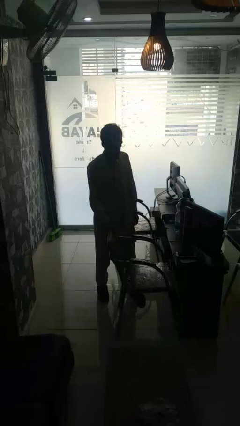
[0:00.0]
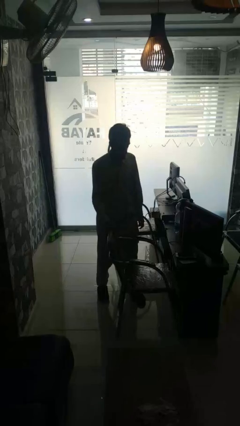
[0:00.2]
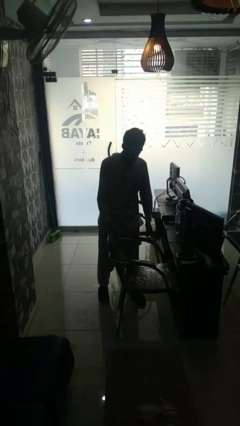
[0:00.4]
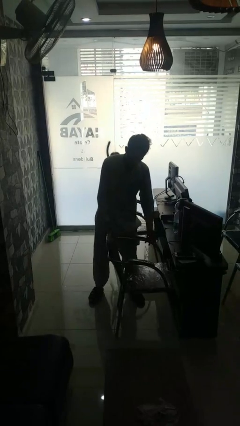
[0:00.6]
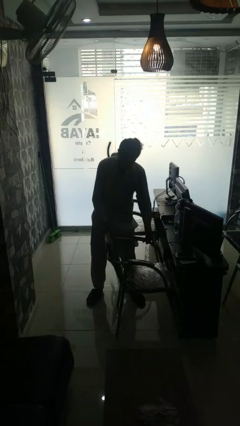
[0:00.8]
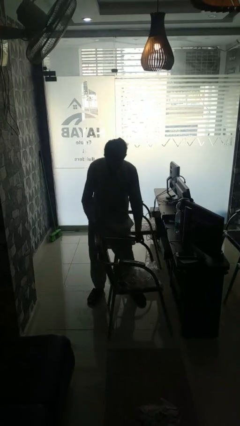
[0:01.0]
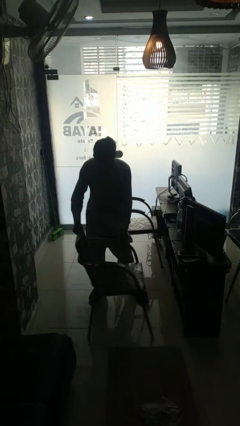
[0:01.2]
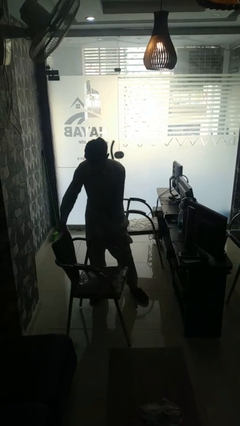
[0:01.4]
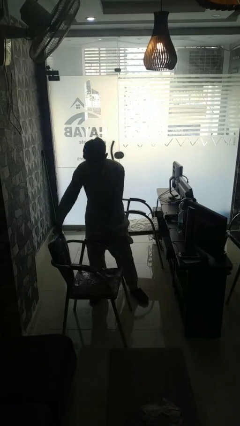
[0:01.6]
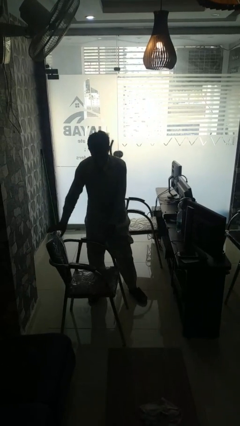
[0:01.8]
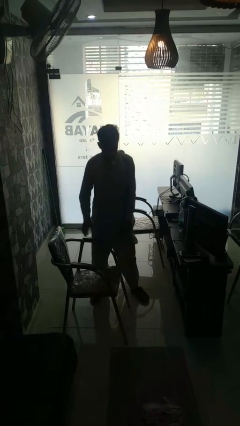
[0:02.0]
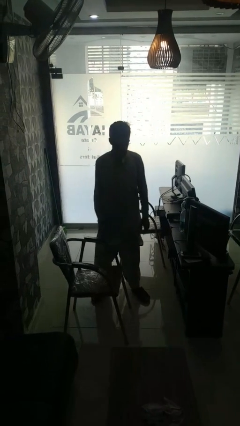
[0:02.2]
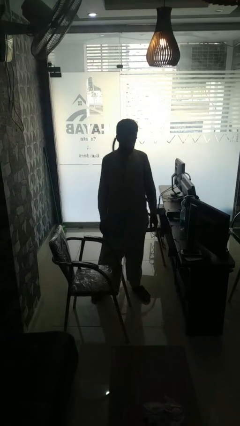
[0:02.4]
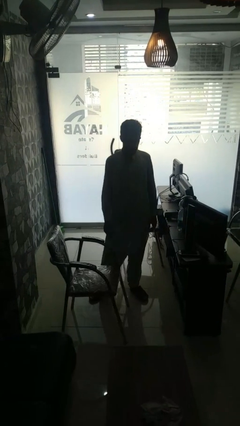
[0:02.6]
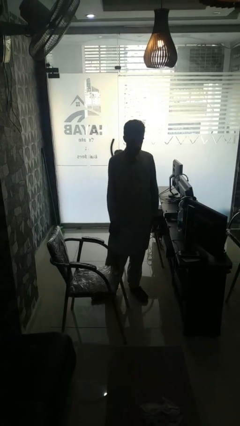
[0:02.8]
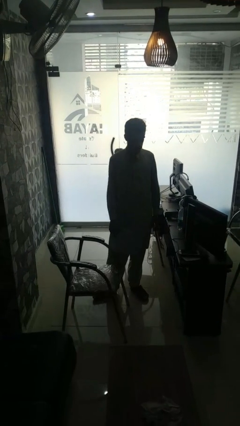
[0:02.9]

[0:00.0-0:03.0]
person pulls out chair

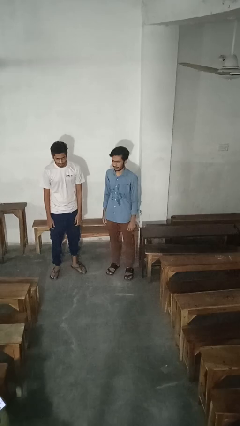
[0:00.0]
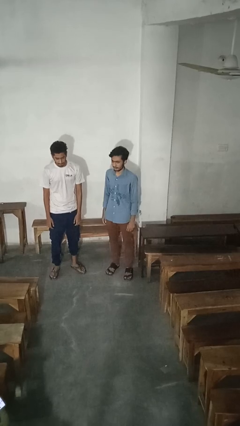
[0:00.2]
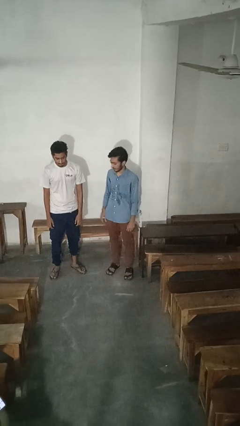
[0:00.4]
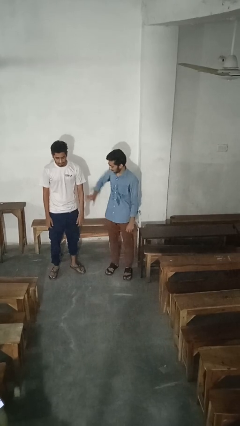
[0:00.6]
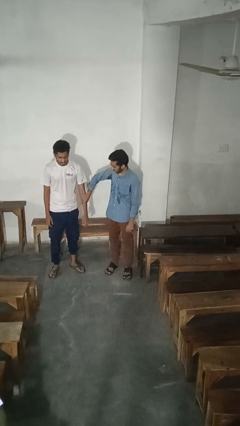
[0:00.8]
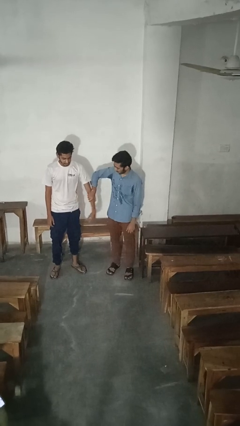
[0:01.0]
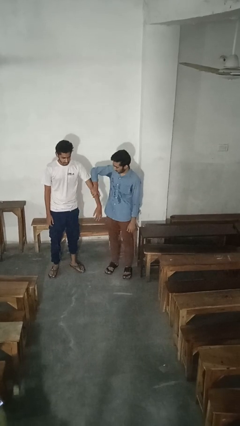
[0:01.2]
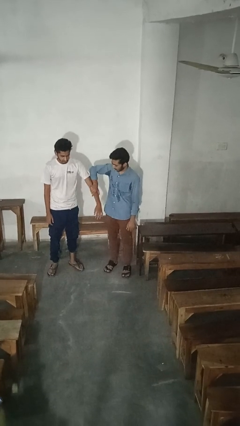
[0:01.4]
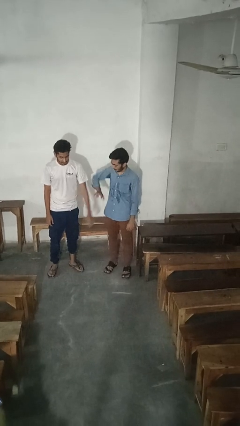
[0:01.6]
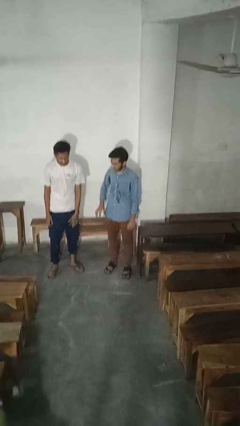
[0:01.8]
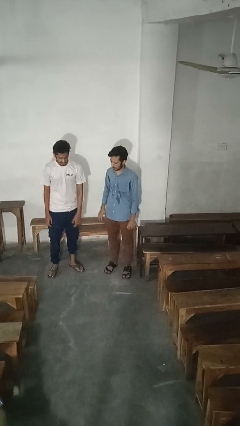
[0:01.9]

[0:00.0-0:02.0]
person grabs person by forearm

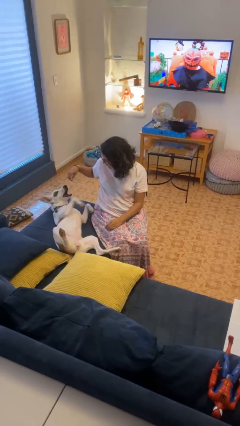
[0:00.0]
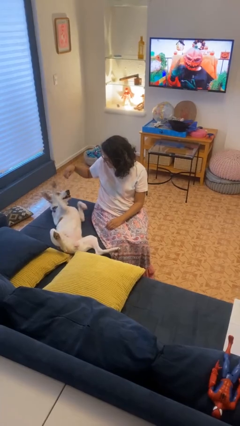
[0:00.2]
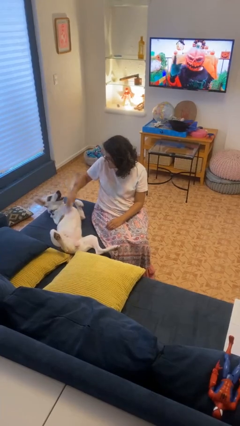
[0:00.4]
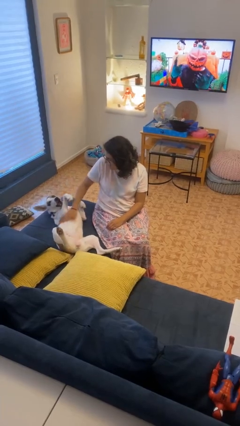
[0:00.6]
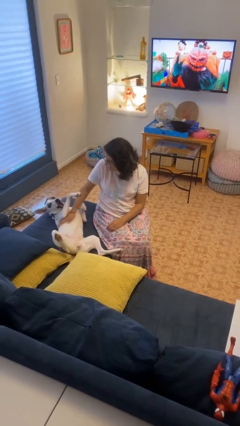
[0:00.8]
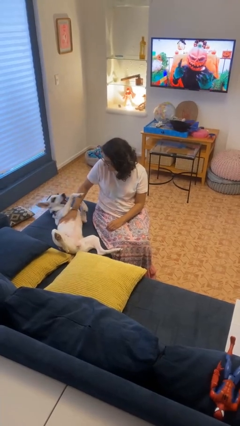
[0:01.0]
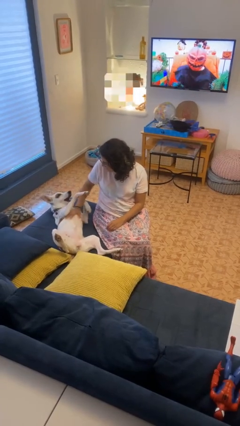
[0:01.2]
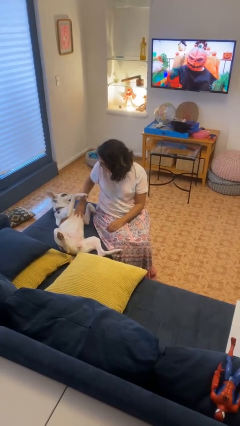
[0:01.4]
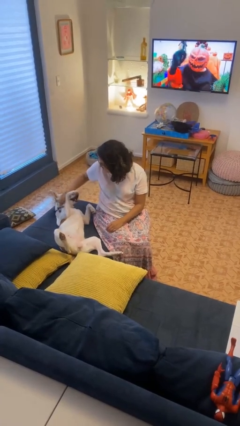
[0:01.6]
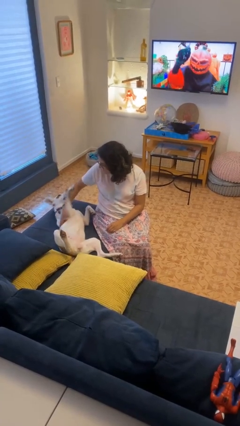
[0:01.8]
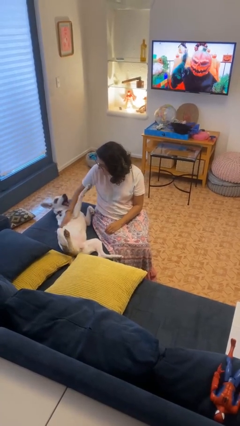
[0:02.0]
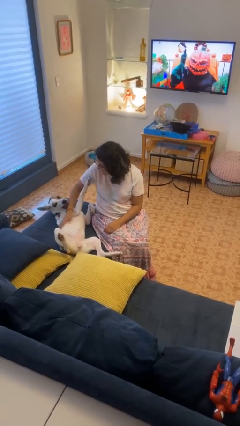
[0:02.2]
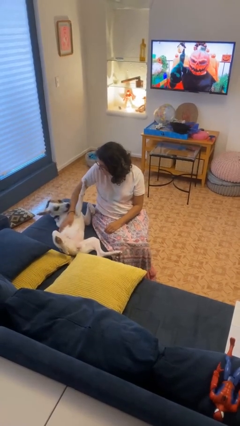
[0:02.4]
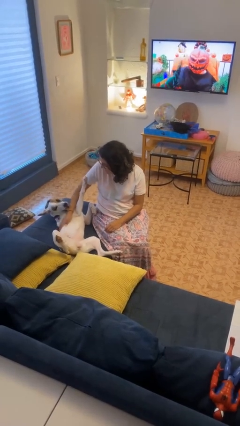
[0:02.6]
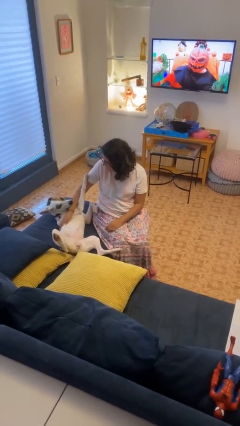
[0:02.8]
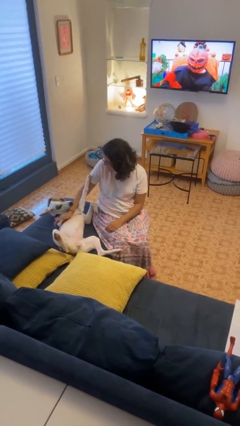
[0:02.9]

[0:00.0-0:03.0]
person pets dog

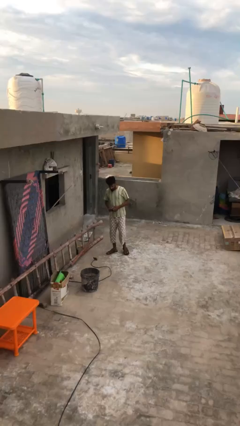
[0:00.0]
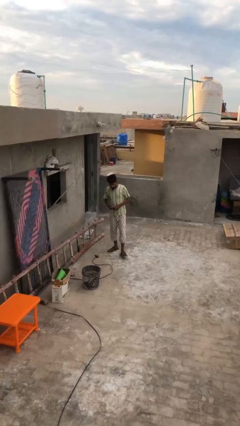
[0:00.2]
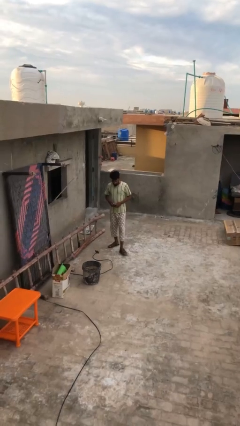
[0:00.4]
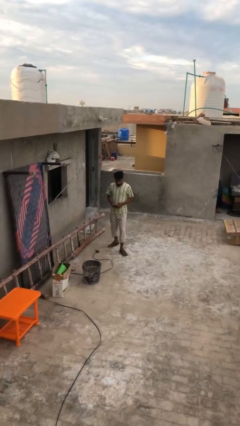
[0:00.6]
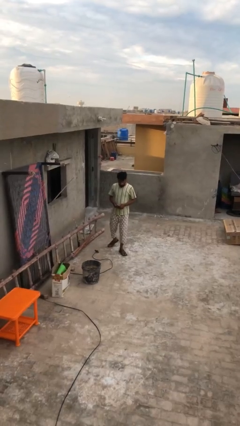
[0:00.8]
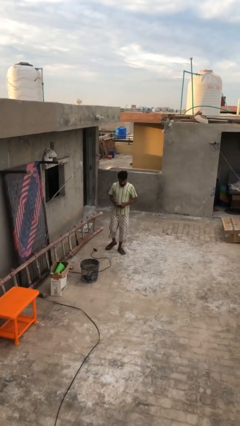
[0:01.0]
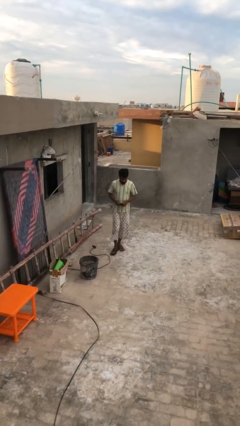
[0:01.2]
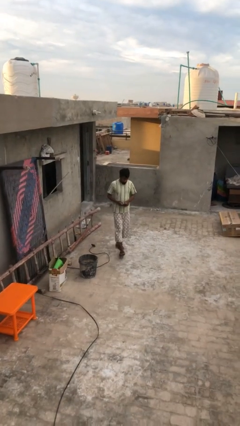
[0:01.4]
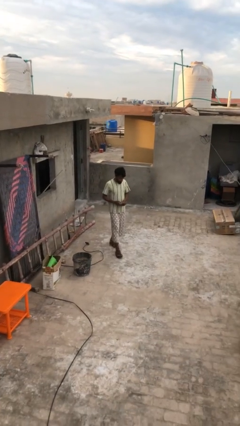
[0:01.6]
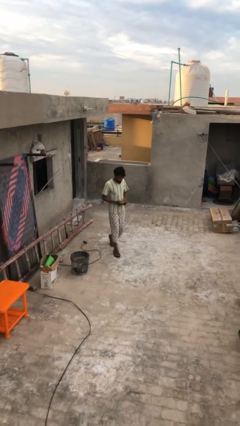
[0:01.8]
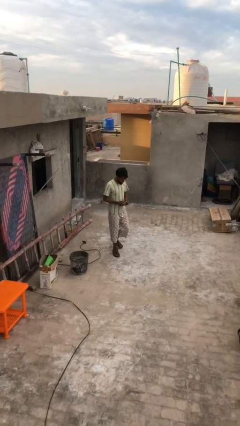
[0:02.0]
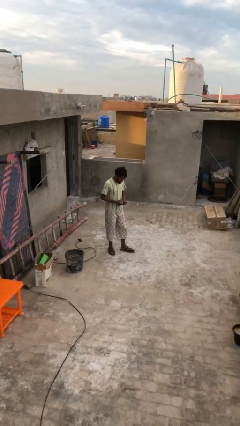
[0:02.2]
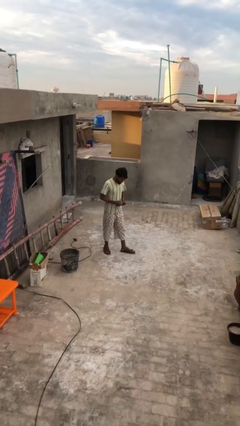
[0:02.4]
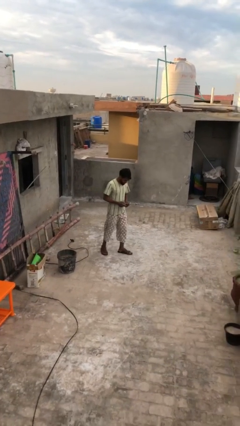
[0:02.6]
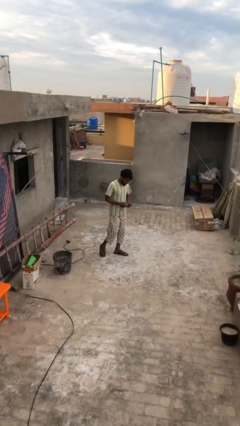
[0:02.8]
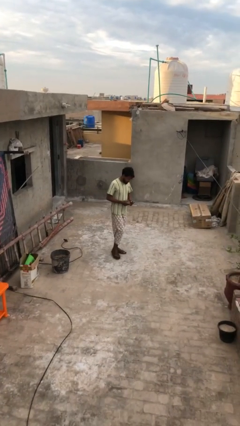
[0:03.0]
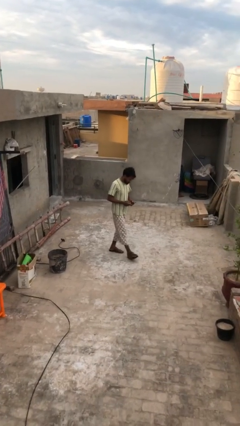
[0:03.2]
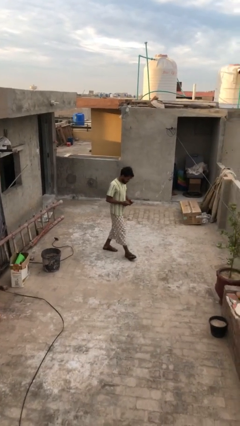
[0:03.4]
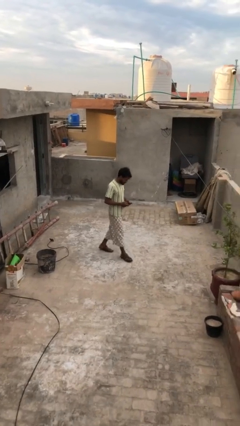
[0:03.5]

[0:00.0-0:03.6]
person texts on phone

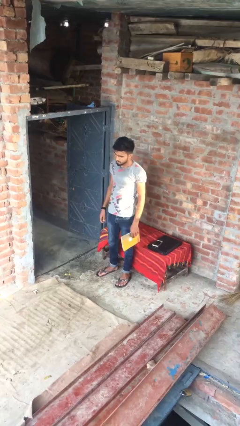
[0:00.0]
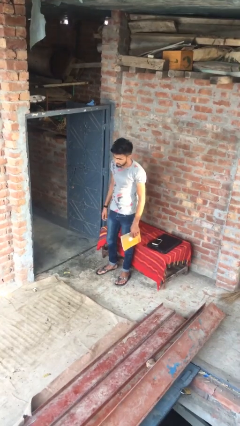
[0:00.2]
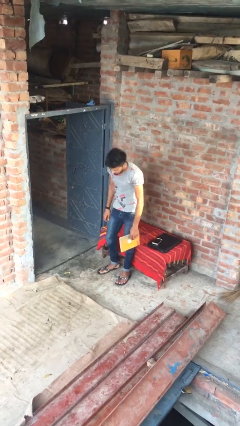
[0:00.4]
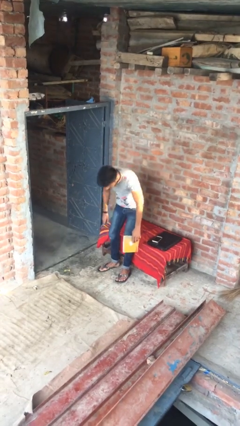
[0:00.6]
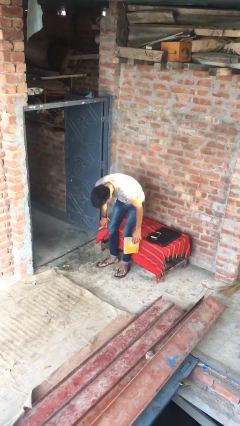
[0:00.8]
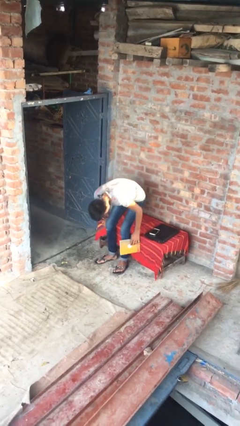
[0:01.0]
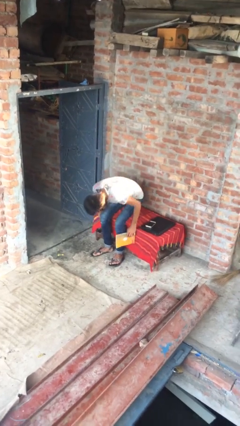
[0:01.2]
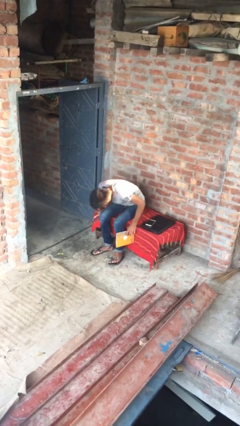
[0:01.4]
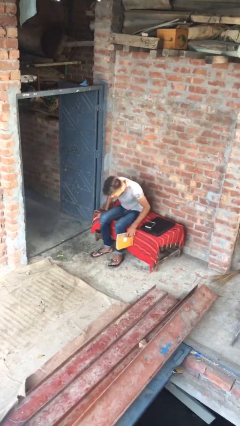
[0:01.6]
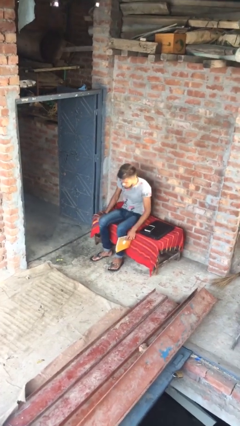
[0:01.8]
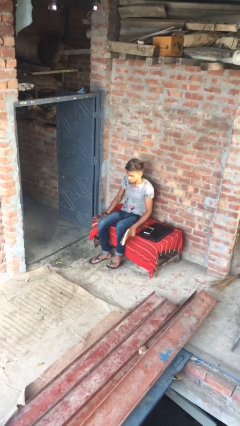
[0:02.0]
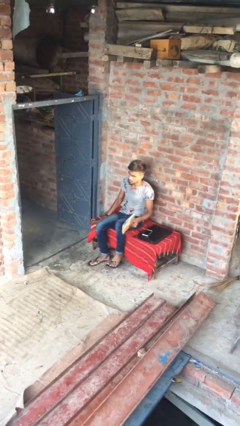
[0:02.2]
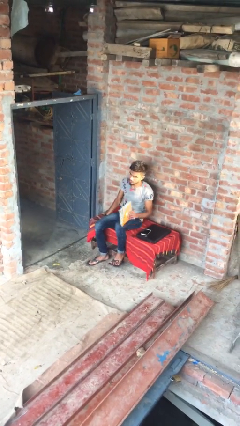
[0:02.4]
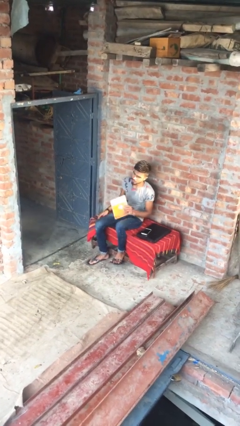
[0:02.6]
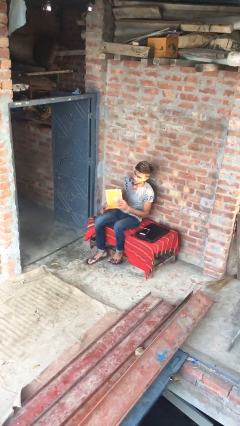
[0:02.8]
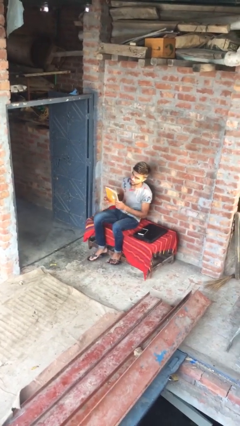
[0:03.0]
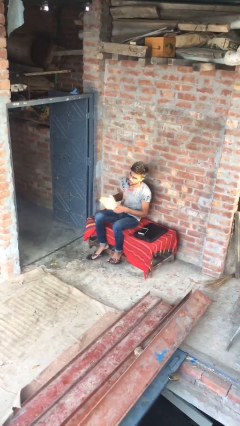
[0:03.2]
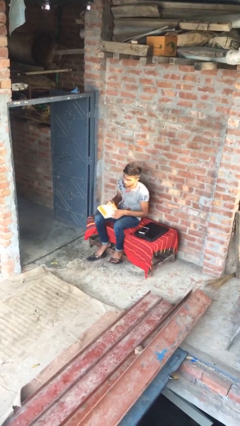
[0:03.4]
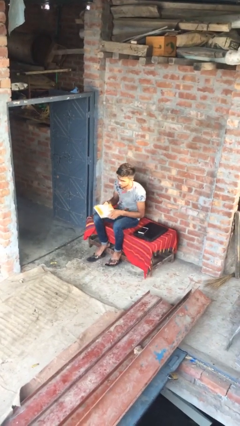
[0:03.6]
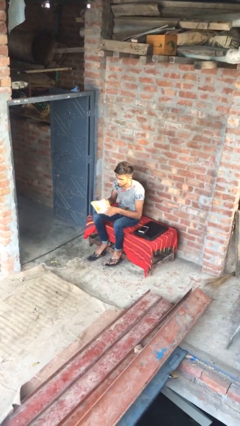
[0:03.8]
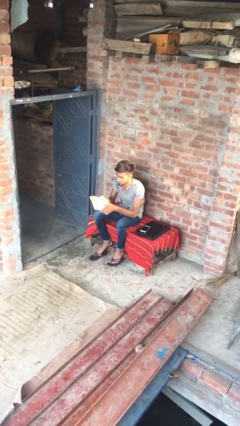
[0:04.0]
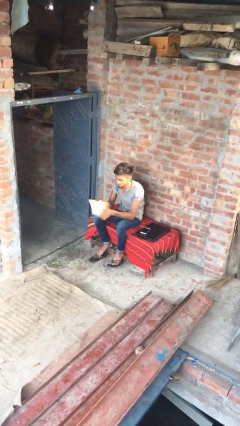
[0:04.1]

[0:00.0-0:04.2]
person sits down

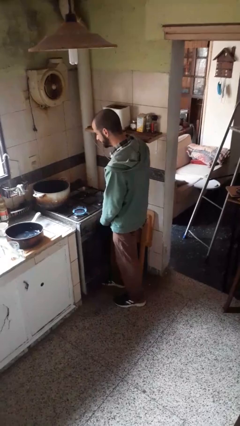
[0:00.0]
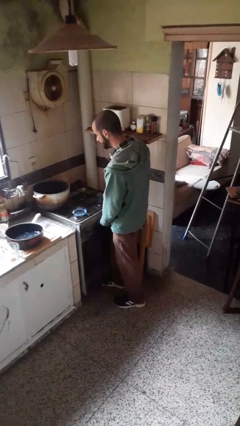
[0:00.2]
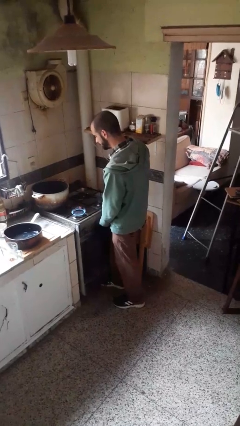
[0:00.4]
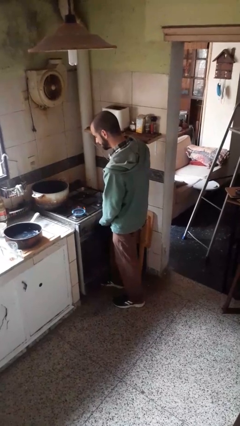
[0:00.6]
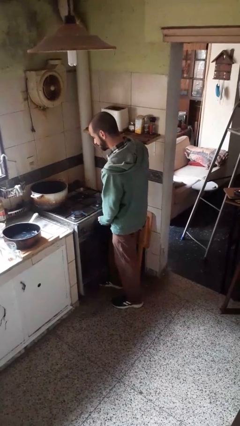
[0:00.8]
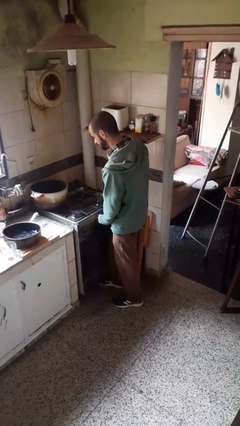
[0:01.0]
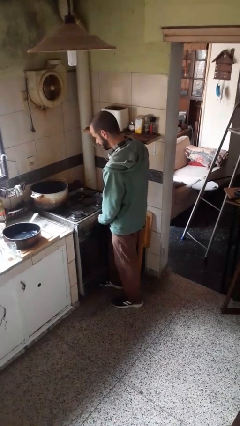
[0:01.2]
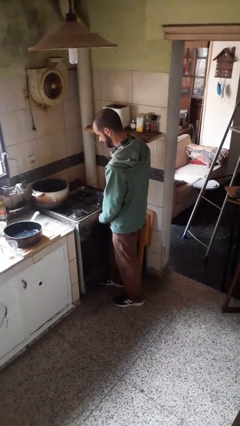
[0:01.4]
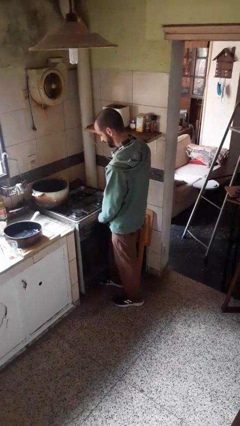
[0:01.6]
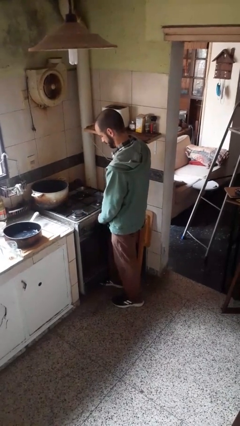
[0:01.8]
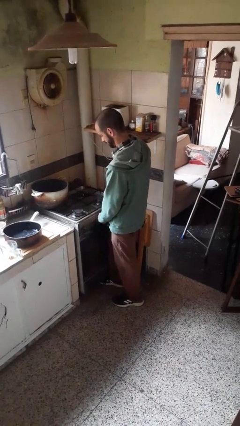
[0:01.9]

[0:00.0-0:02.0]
person turns off stovetop
